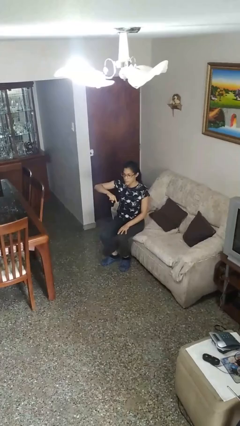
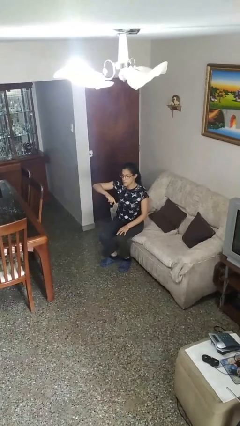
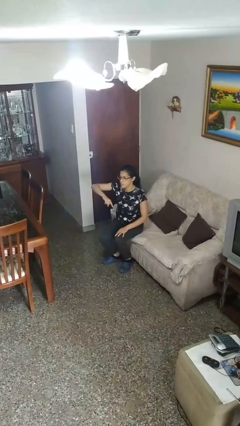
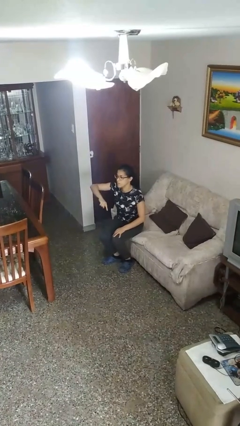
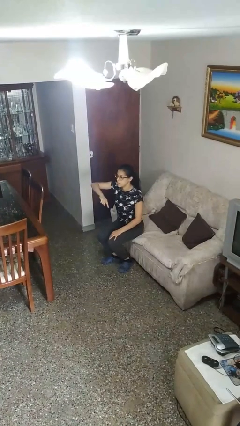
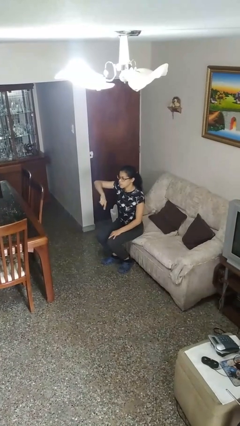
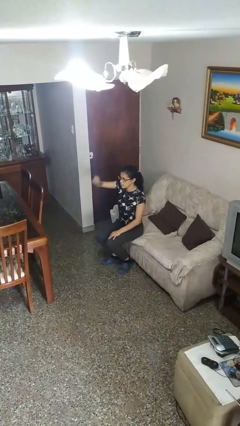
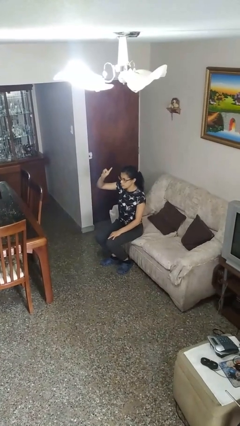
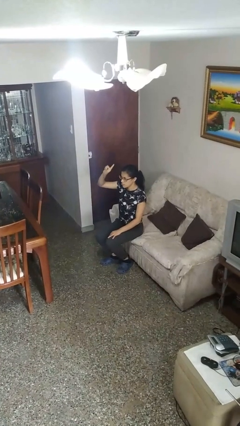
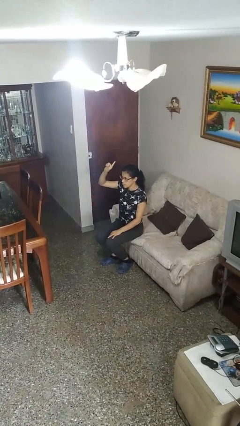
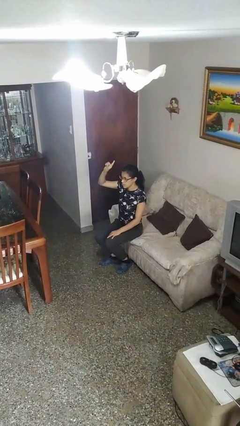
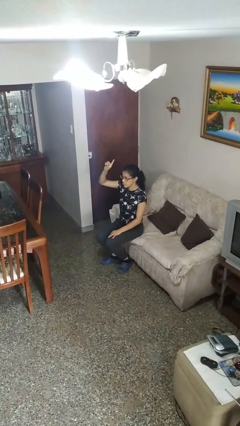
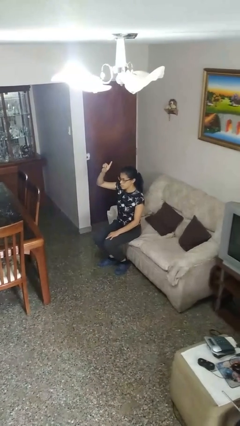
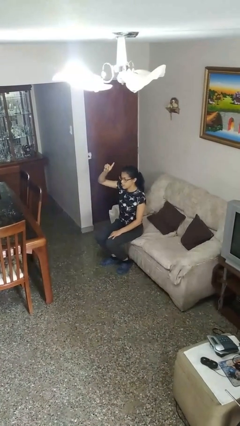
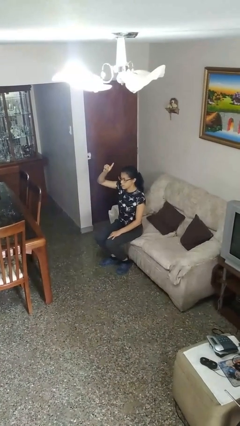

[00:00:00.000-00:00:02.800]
person gestures swipe up

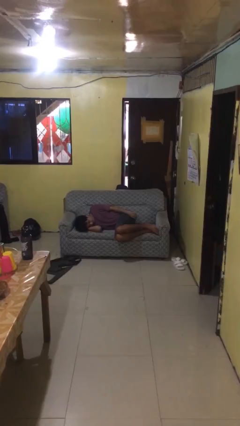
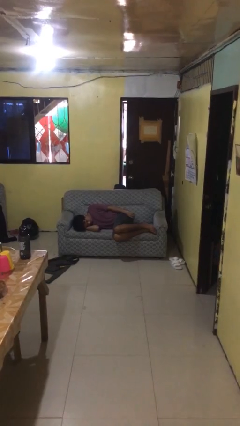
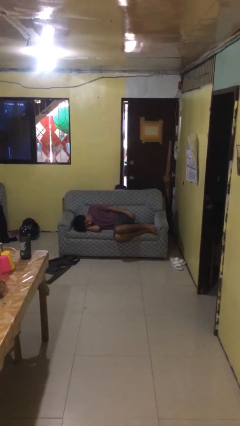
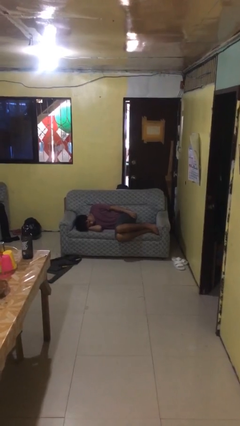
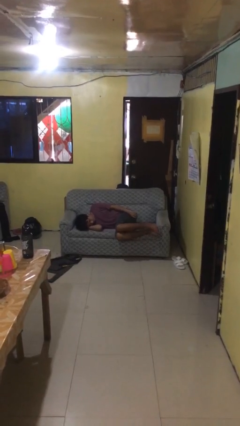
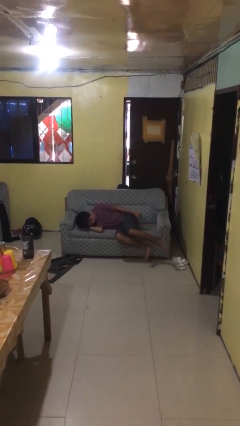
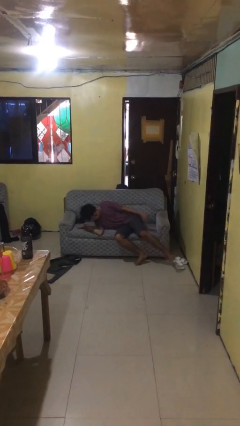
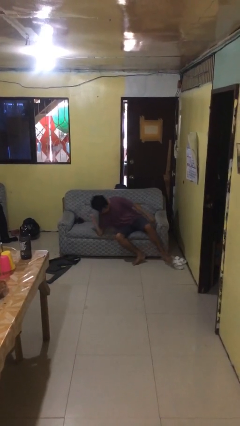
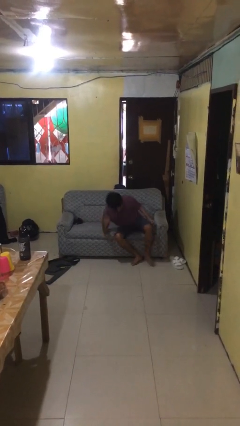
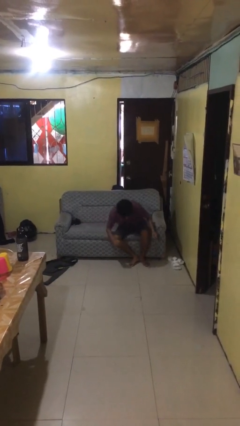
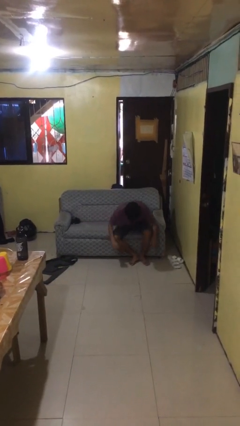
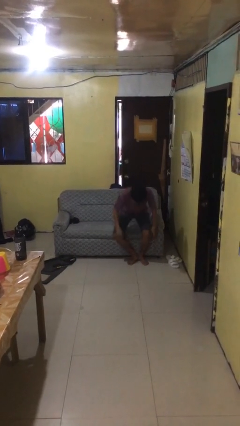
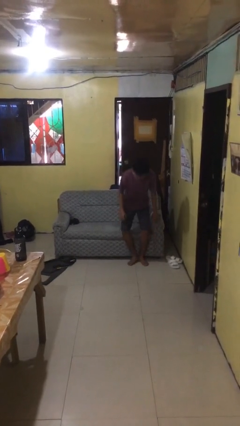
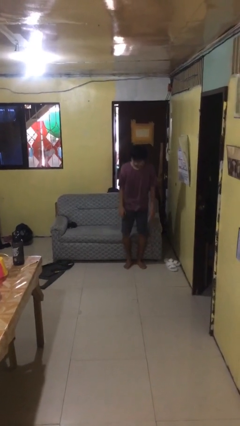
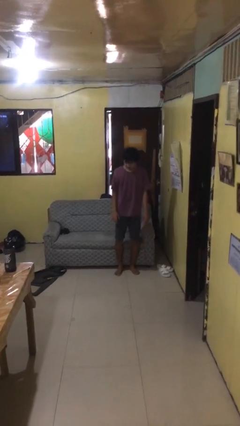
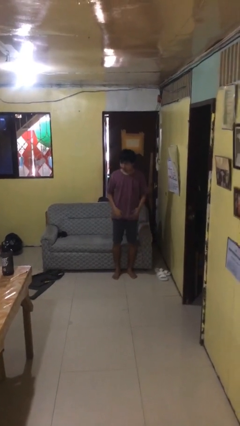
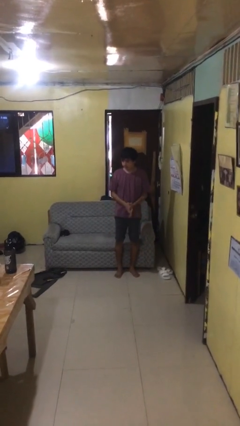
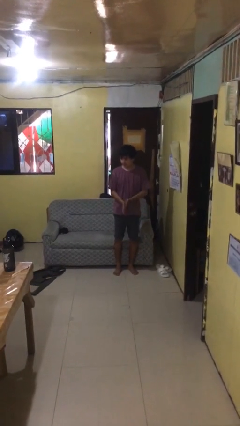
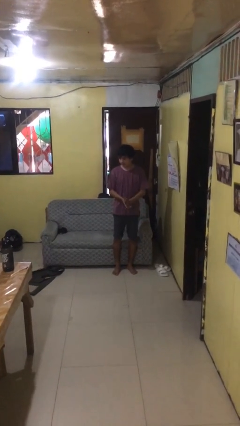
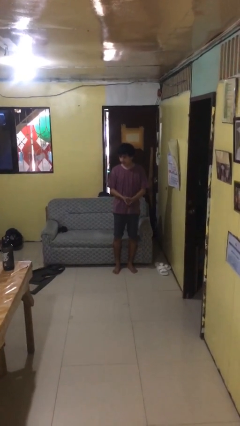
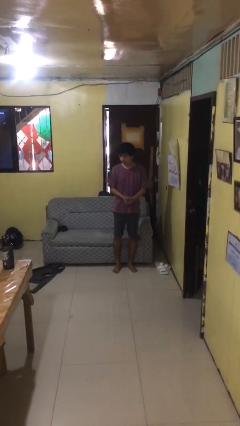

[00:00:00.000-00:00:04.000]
person stands up

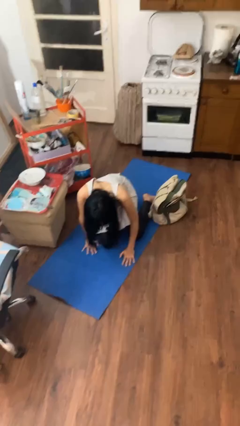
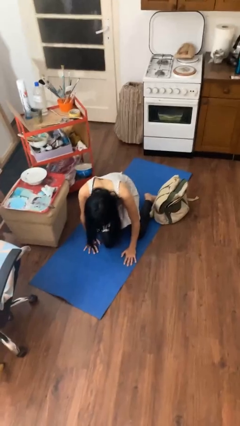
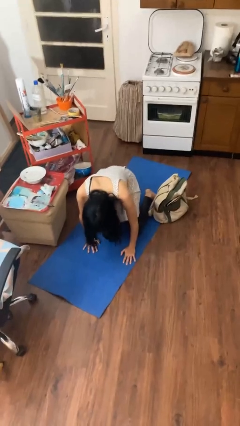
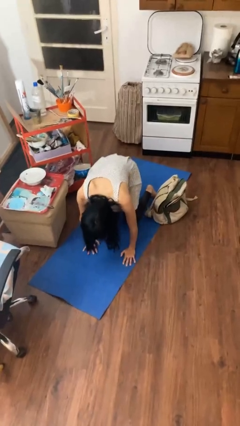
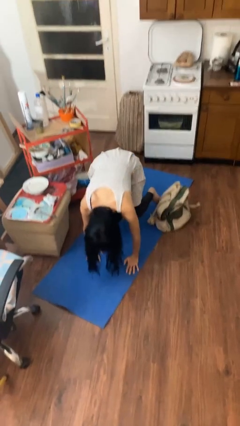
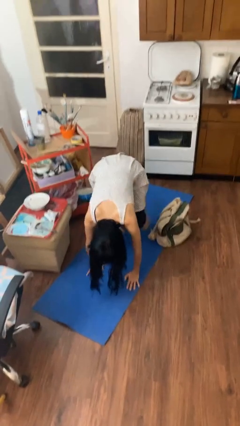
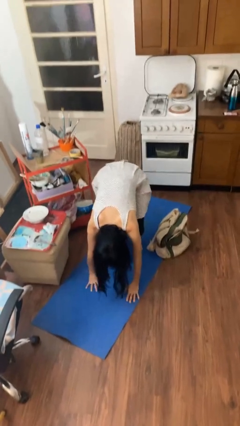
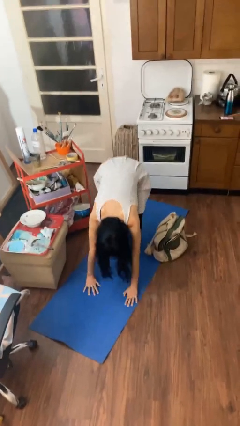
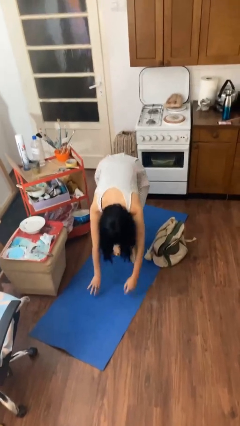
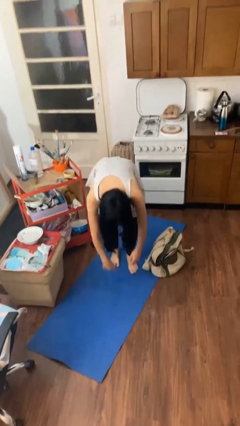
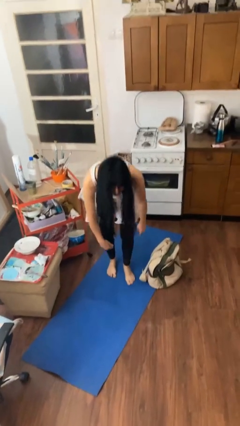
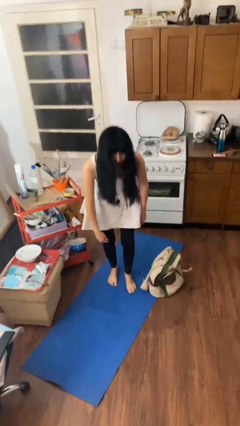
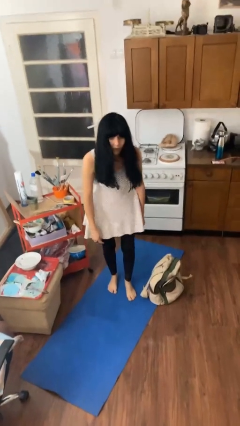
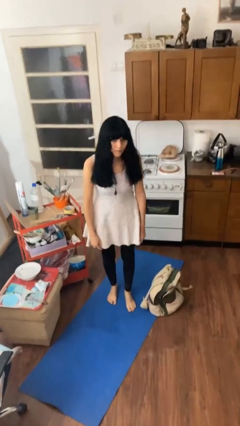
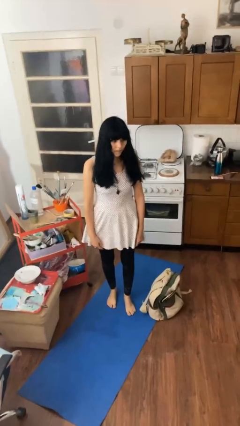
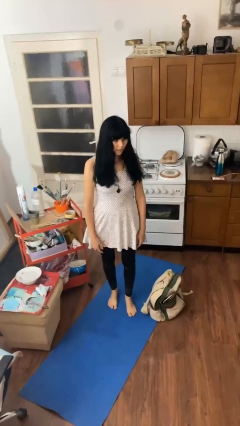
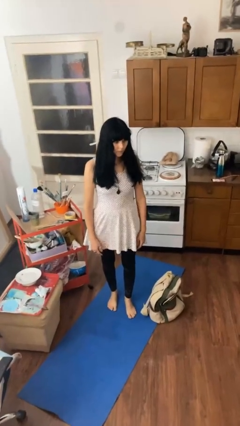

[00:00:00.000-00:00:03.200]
person stands up from floor

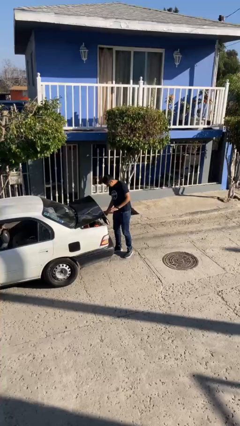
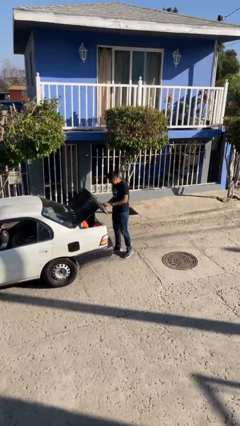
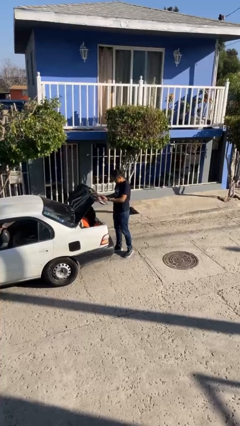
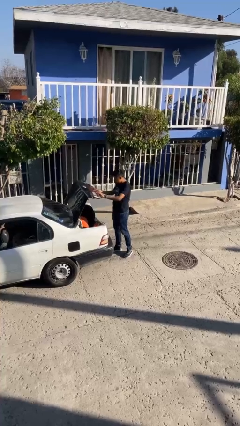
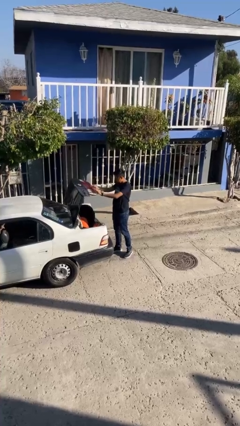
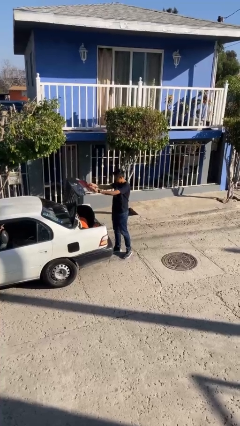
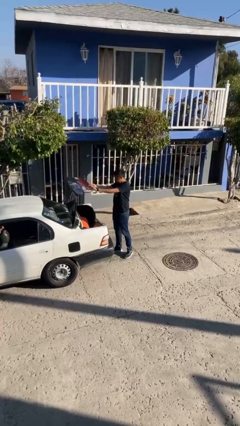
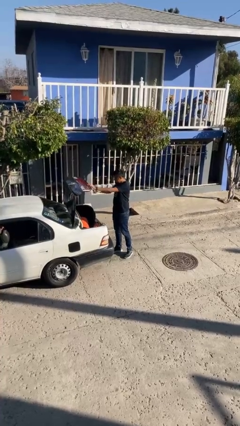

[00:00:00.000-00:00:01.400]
person opens car trunk

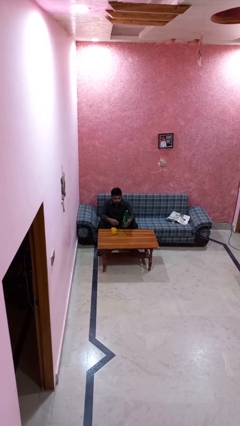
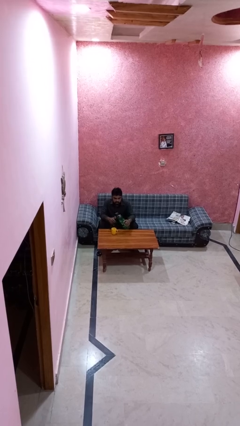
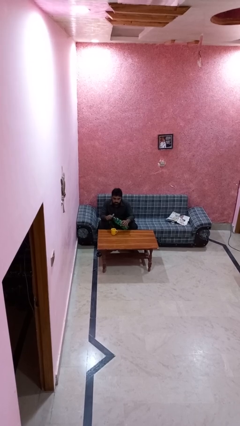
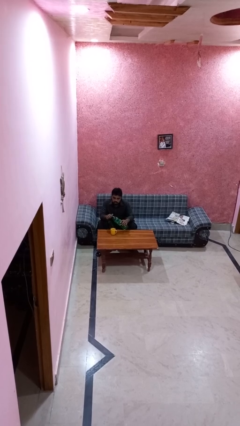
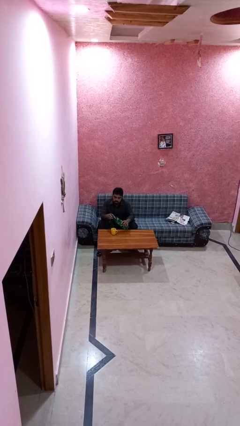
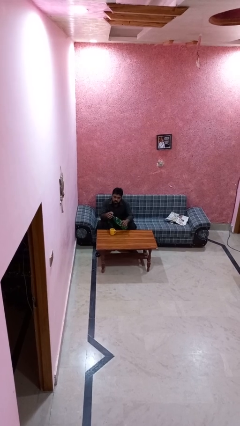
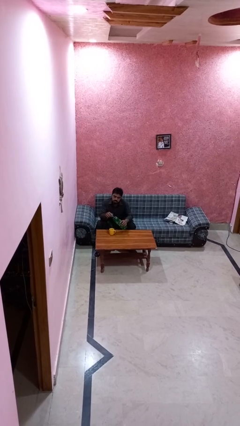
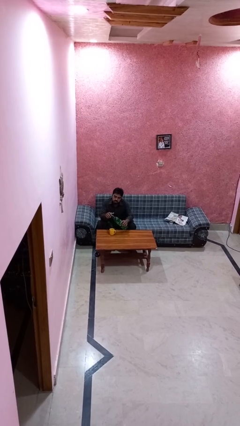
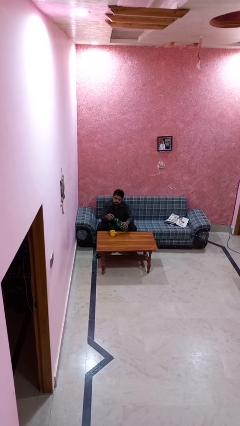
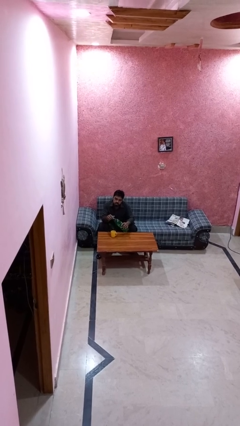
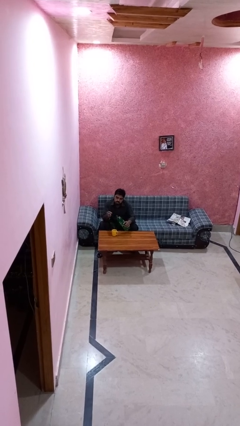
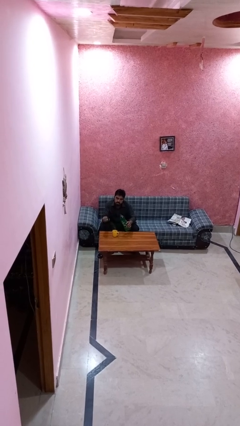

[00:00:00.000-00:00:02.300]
person unscrews lid from bottle

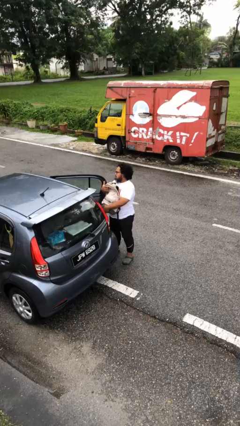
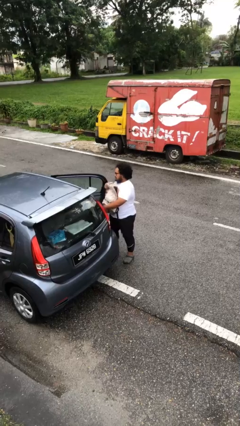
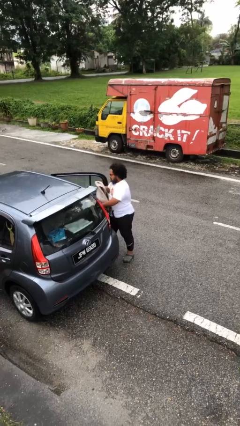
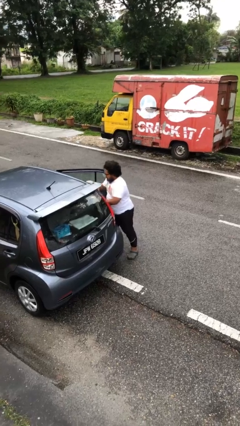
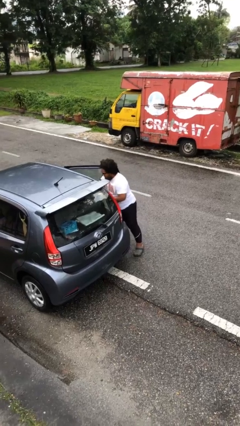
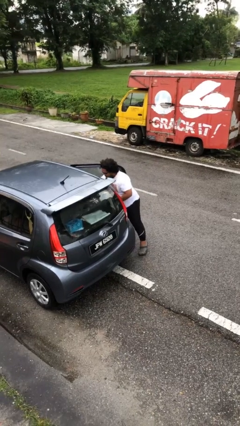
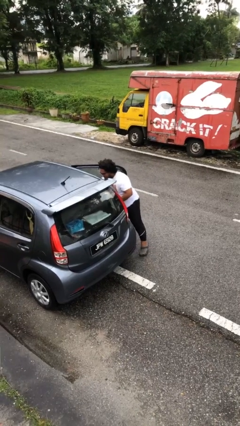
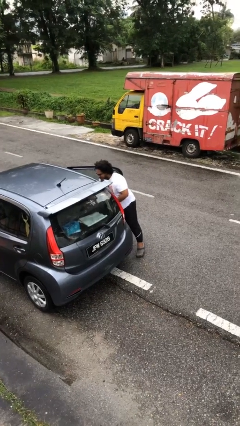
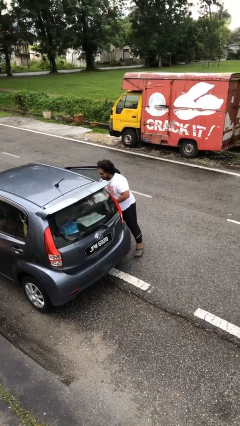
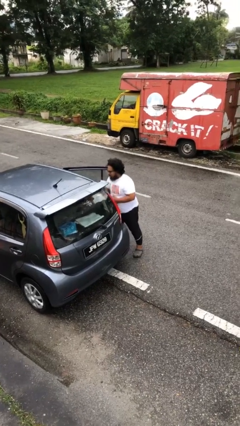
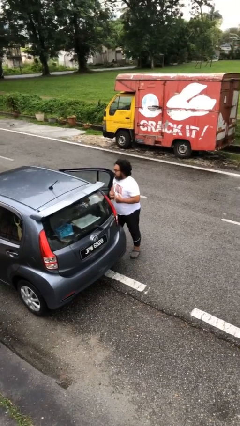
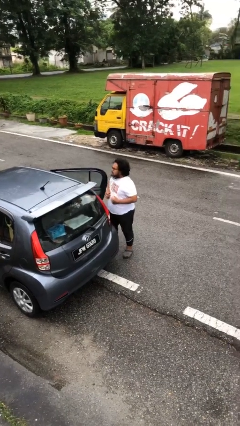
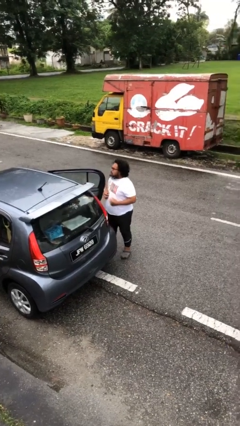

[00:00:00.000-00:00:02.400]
person loads car

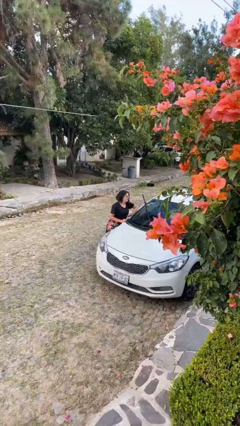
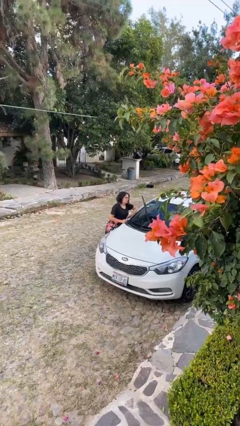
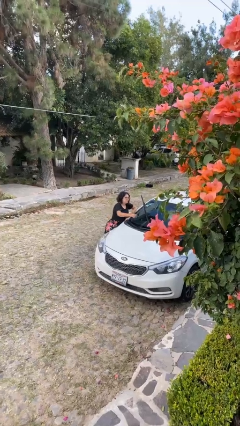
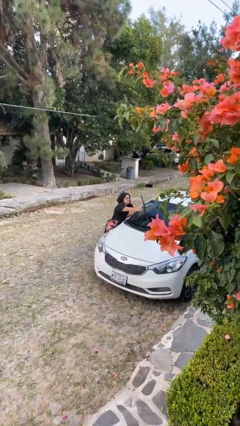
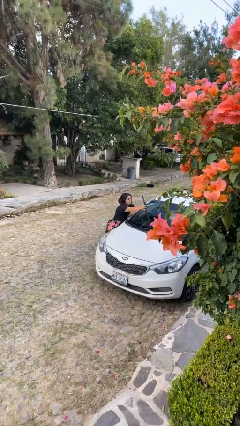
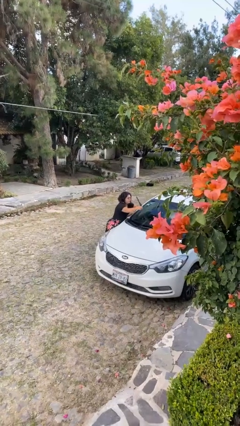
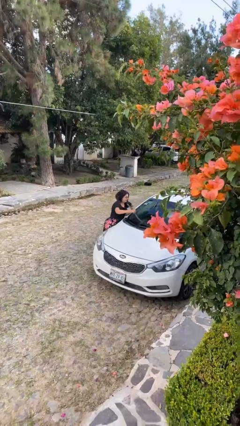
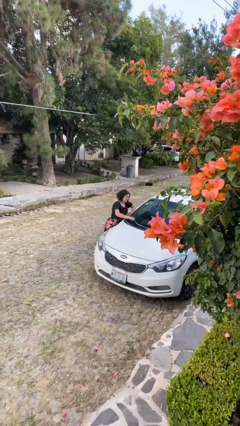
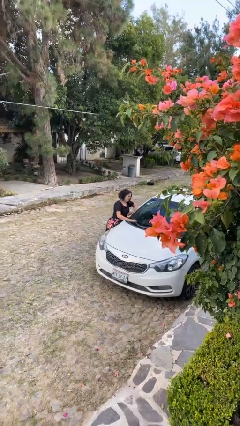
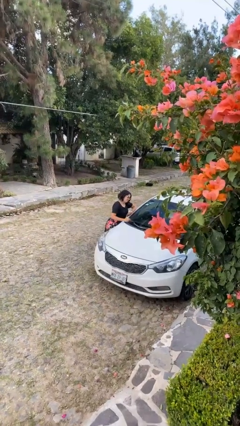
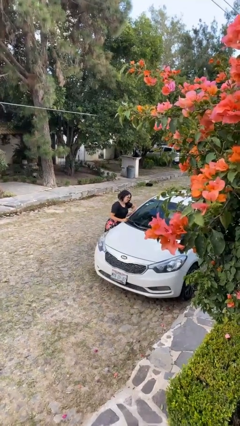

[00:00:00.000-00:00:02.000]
person flips down car wipers
